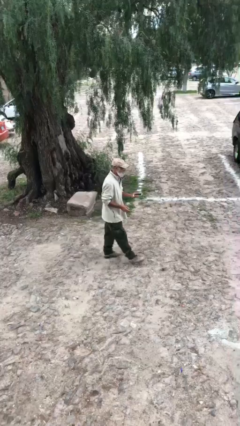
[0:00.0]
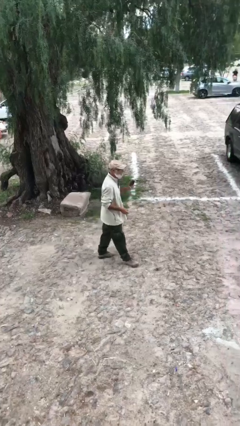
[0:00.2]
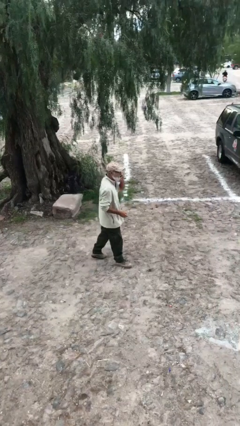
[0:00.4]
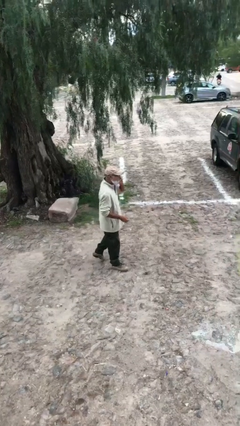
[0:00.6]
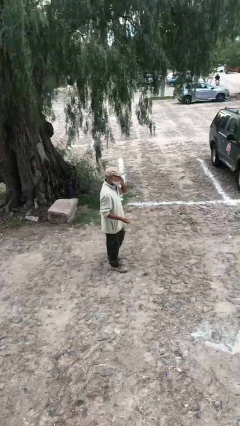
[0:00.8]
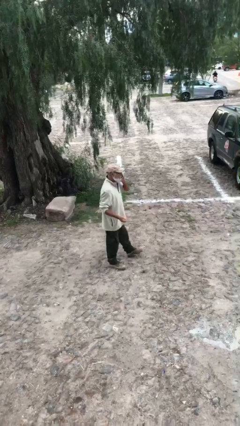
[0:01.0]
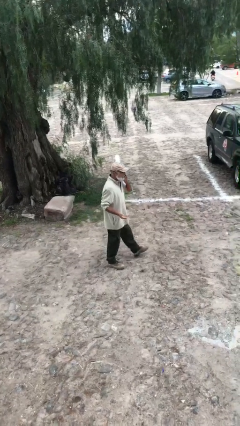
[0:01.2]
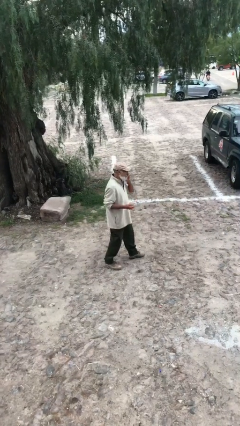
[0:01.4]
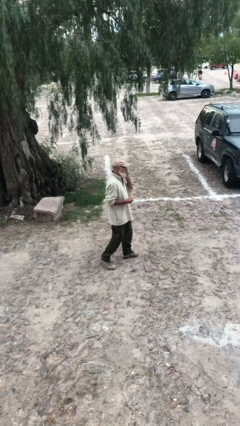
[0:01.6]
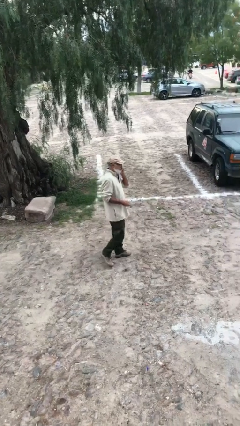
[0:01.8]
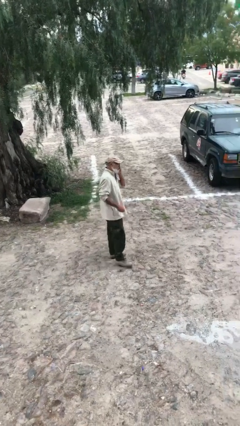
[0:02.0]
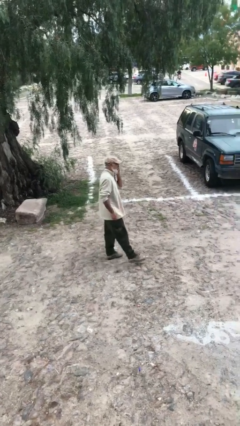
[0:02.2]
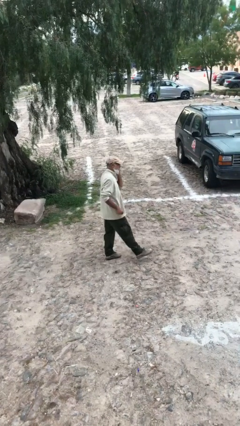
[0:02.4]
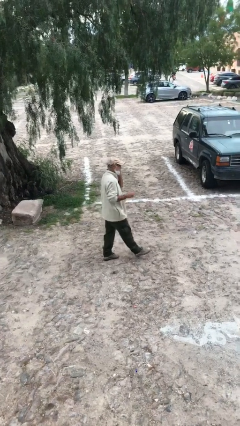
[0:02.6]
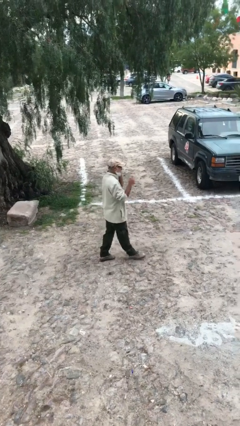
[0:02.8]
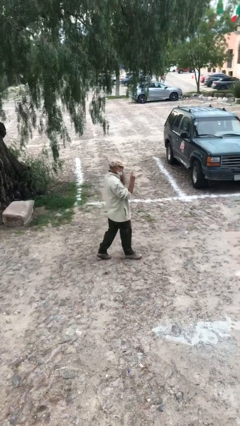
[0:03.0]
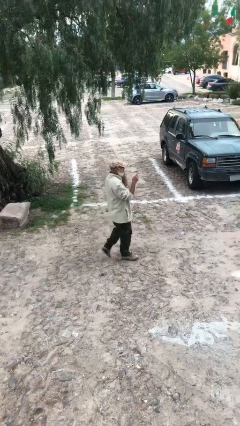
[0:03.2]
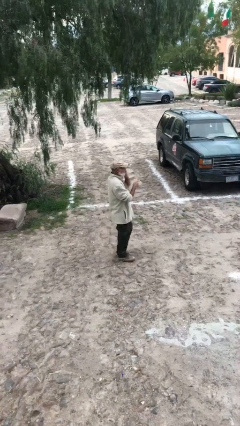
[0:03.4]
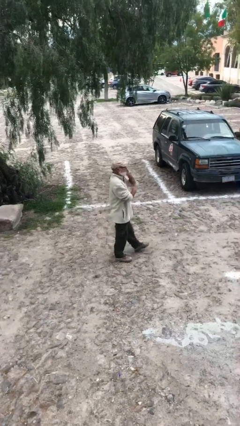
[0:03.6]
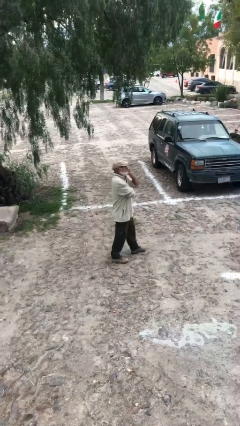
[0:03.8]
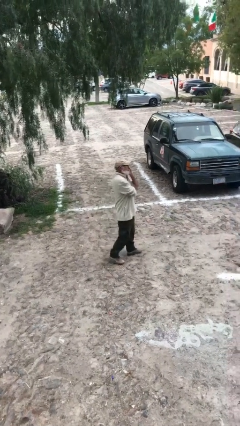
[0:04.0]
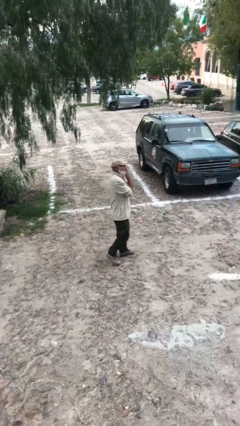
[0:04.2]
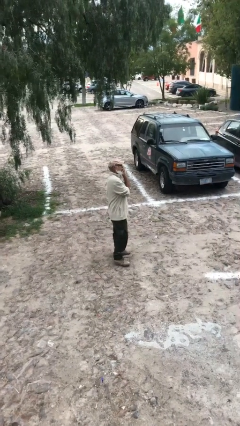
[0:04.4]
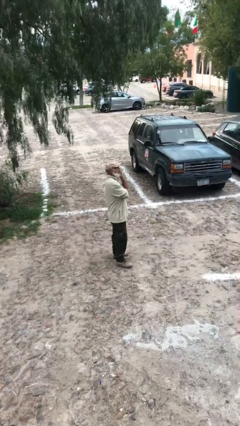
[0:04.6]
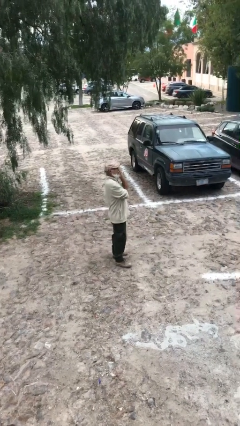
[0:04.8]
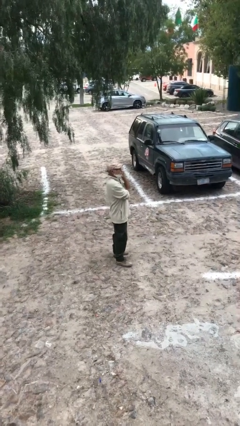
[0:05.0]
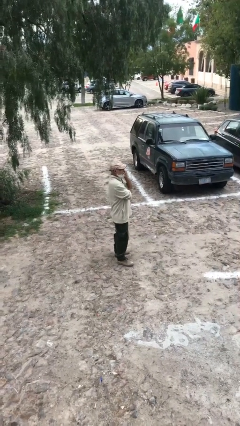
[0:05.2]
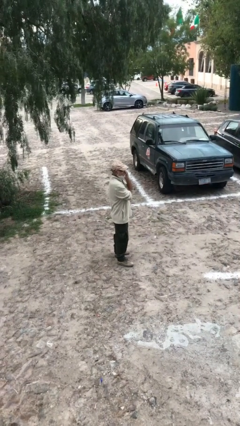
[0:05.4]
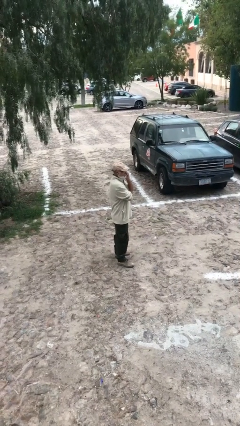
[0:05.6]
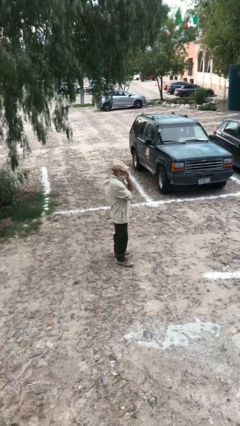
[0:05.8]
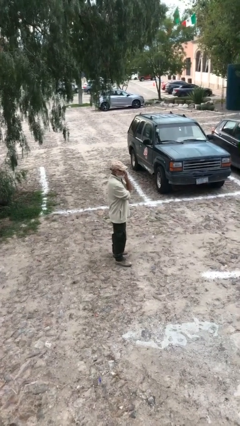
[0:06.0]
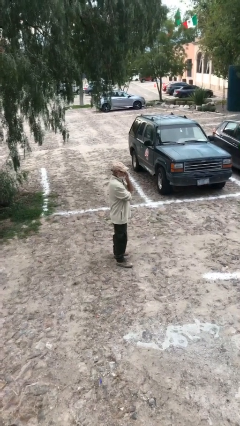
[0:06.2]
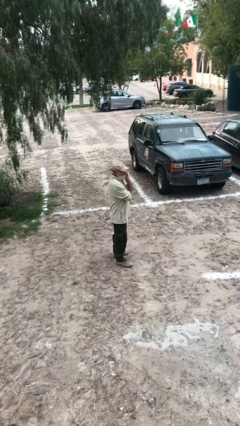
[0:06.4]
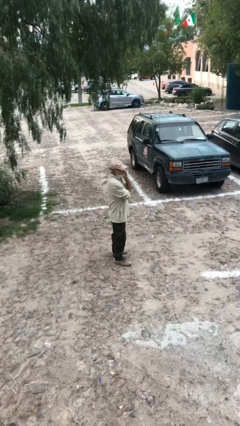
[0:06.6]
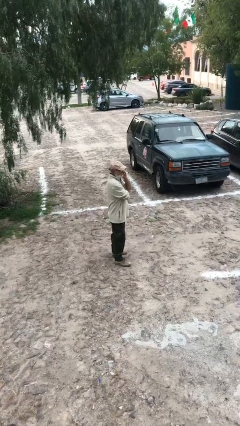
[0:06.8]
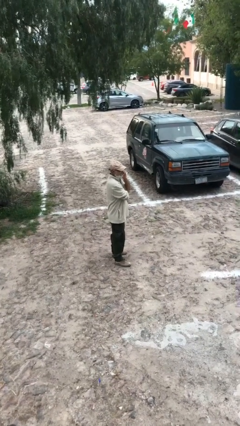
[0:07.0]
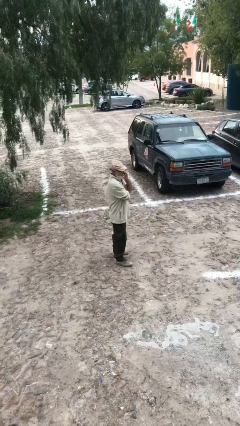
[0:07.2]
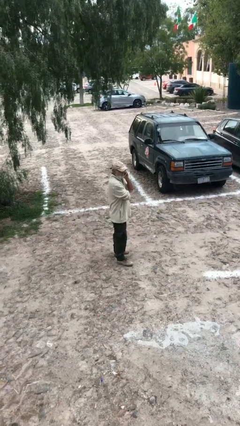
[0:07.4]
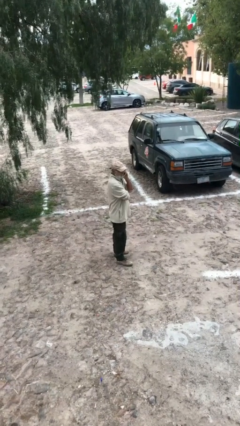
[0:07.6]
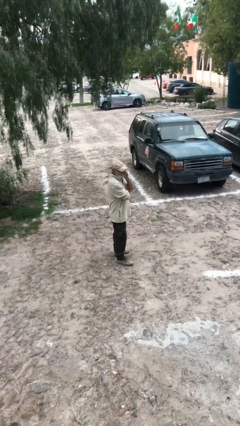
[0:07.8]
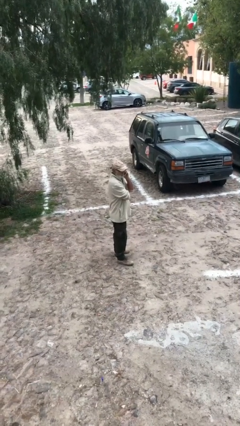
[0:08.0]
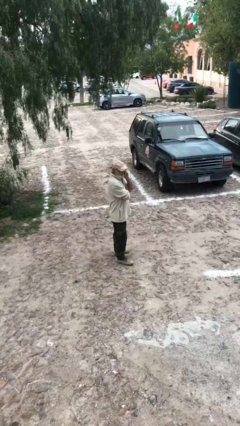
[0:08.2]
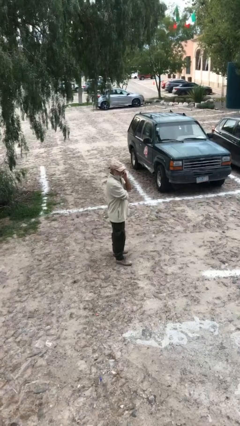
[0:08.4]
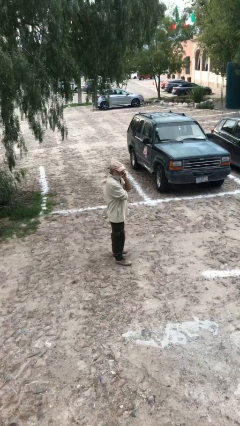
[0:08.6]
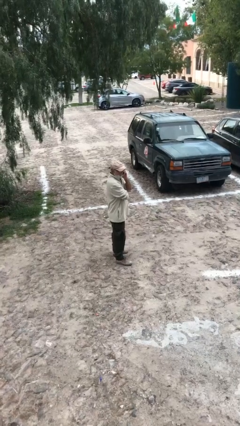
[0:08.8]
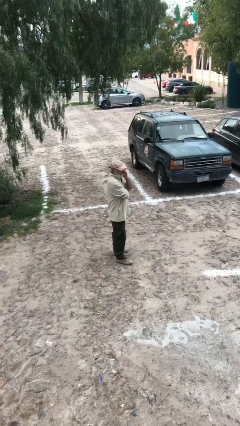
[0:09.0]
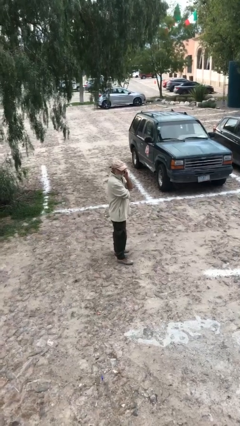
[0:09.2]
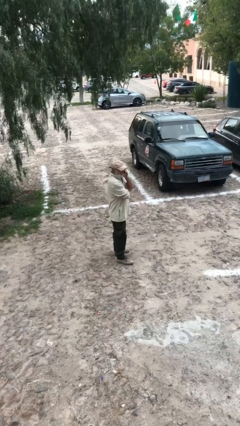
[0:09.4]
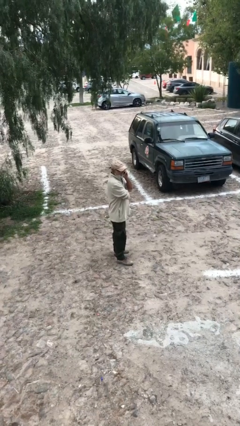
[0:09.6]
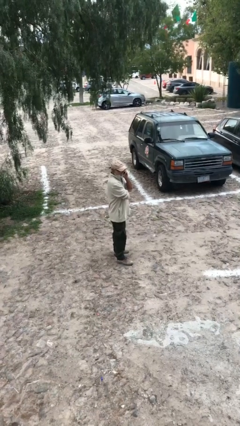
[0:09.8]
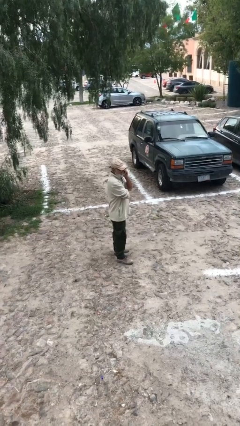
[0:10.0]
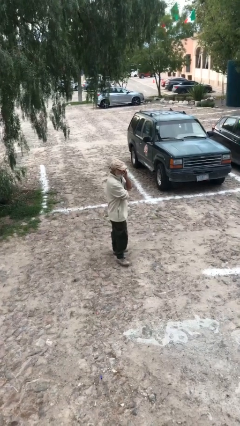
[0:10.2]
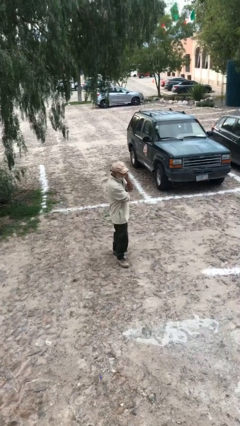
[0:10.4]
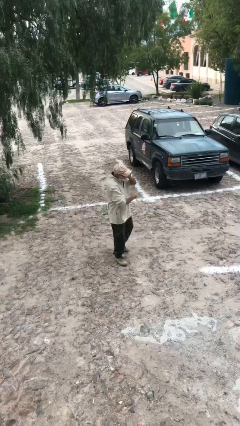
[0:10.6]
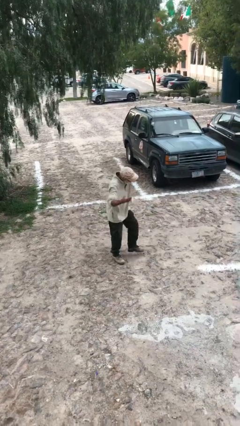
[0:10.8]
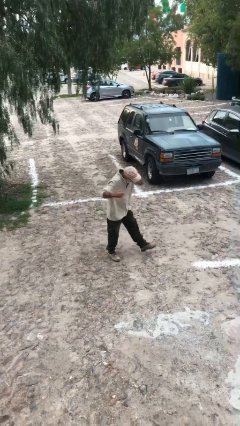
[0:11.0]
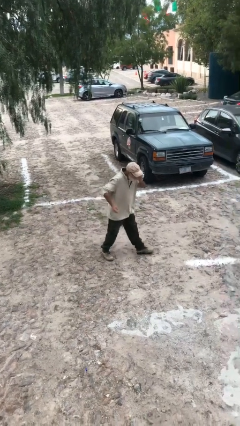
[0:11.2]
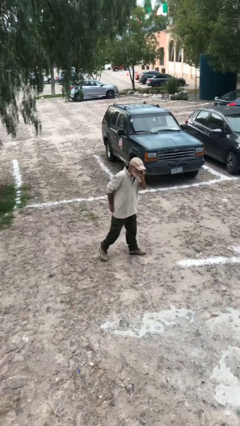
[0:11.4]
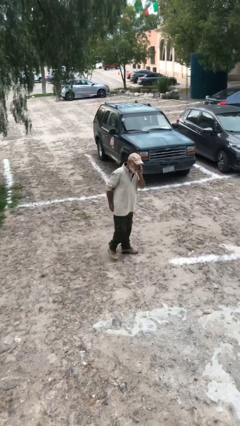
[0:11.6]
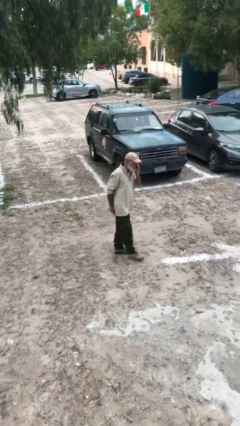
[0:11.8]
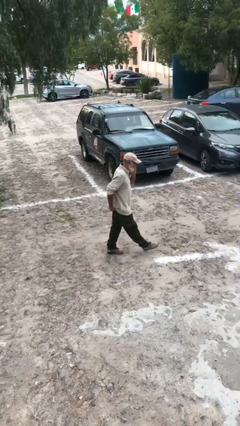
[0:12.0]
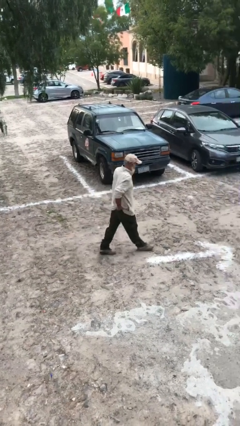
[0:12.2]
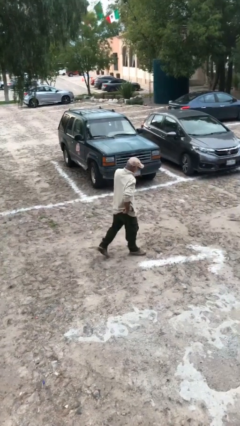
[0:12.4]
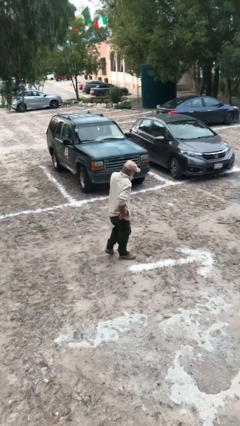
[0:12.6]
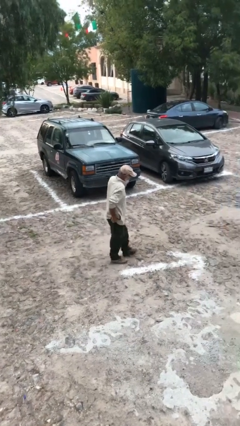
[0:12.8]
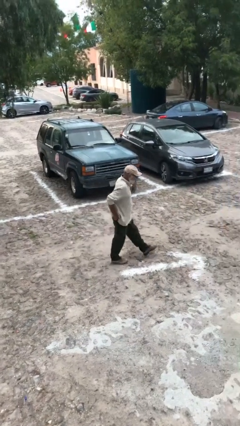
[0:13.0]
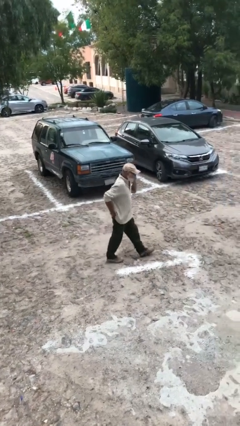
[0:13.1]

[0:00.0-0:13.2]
person talks on phone

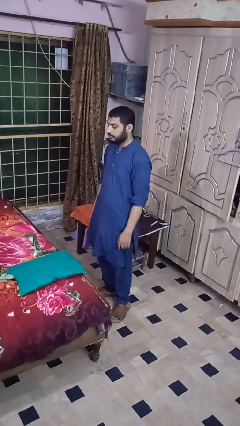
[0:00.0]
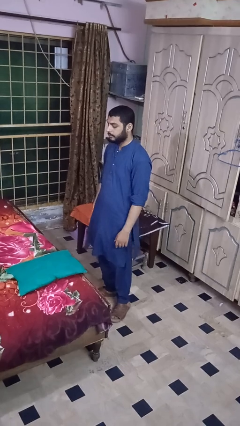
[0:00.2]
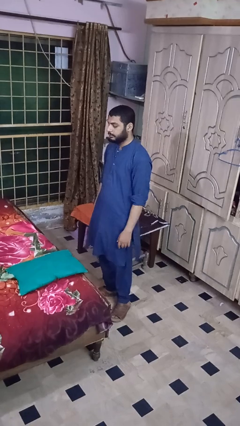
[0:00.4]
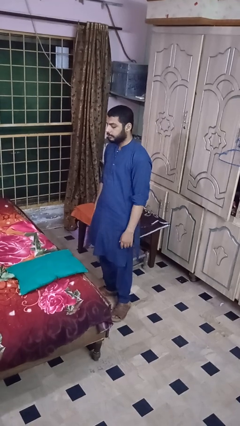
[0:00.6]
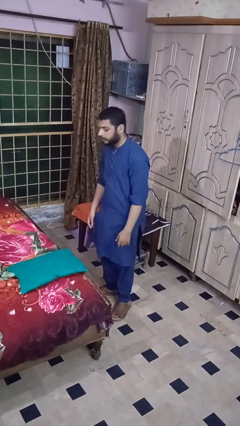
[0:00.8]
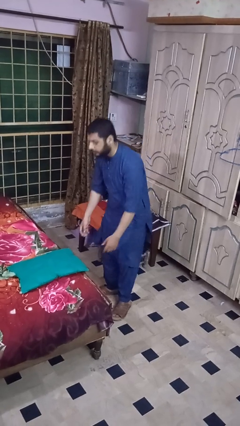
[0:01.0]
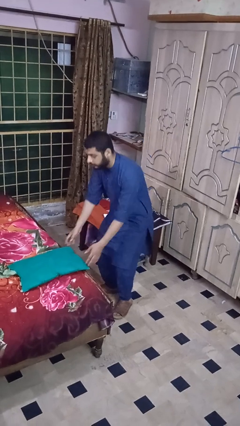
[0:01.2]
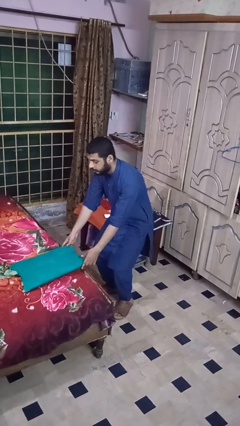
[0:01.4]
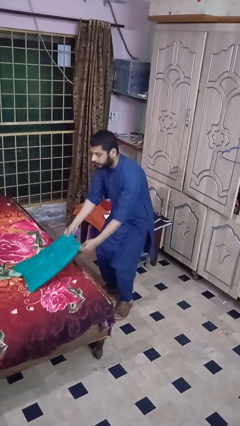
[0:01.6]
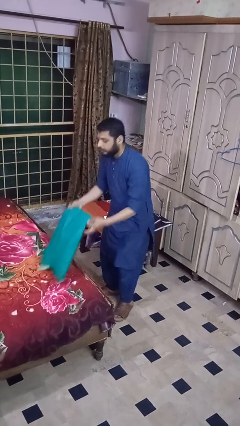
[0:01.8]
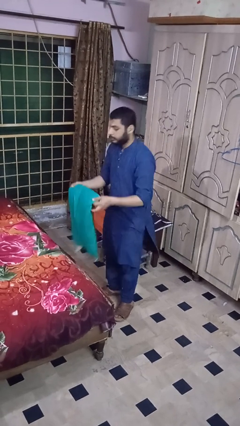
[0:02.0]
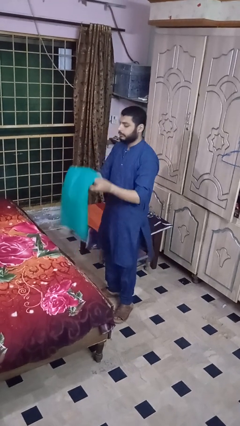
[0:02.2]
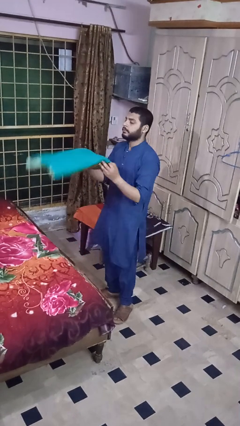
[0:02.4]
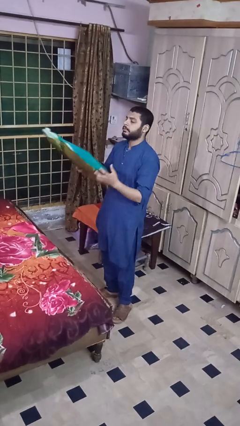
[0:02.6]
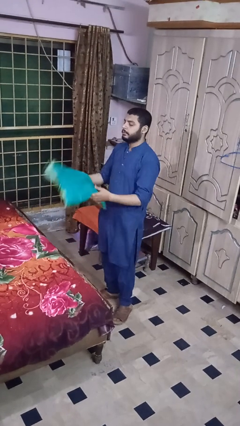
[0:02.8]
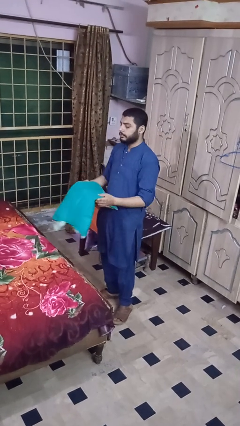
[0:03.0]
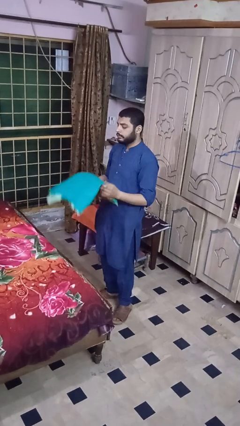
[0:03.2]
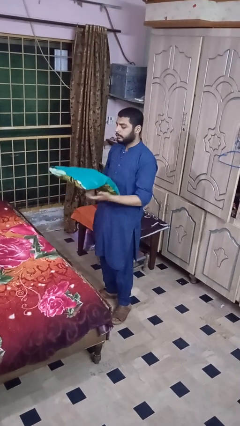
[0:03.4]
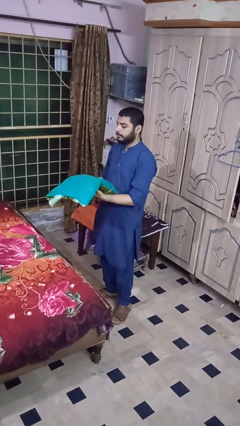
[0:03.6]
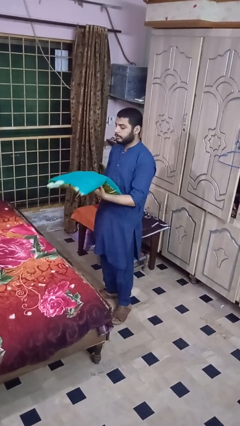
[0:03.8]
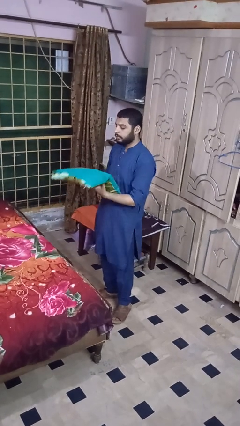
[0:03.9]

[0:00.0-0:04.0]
person picks up object from bed

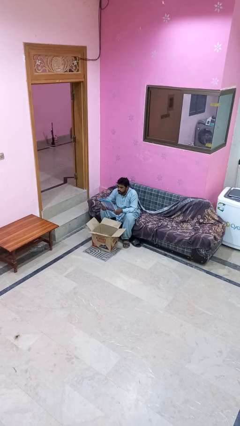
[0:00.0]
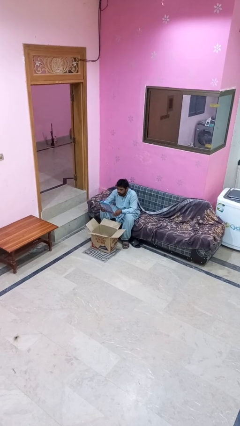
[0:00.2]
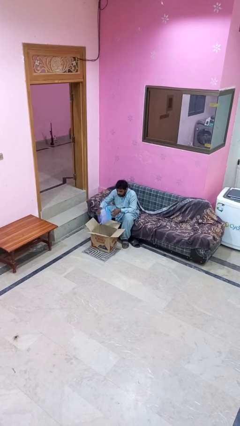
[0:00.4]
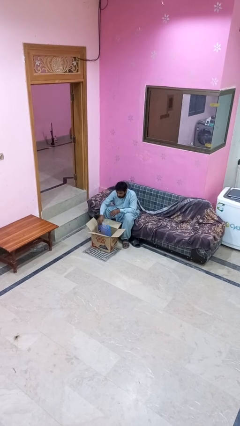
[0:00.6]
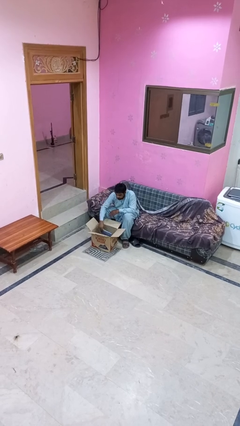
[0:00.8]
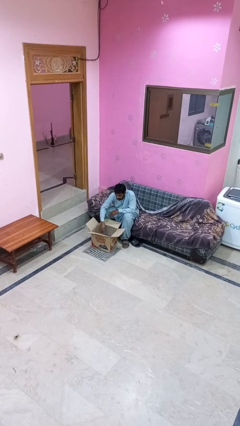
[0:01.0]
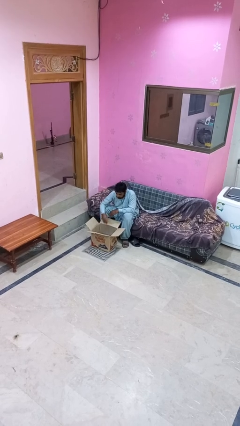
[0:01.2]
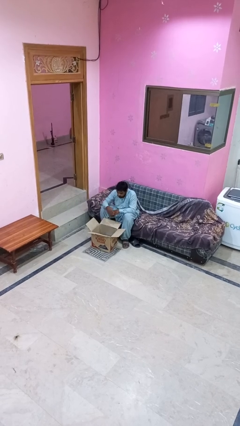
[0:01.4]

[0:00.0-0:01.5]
person puts object into box
